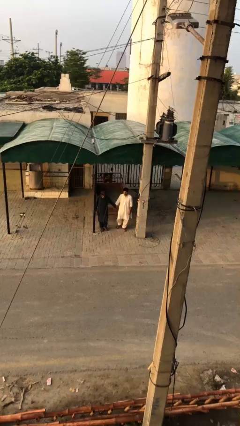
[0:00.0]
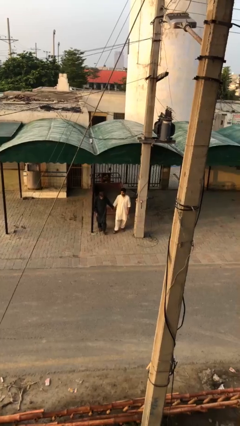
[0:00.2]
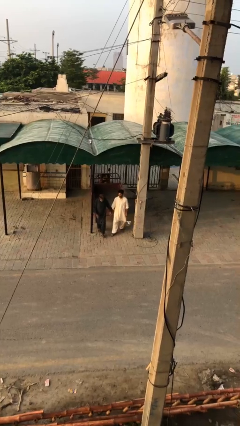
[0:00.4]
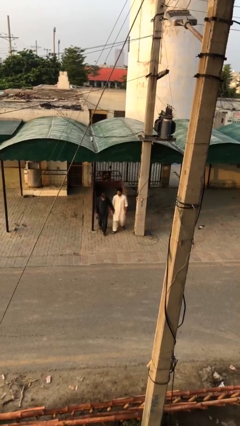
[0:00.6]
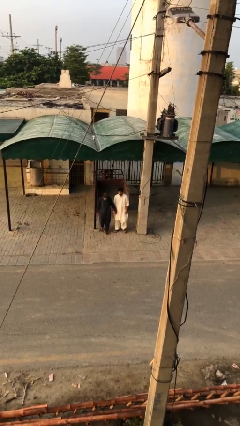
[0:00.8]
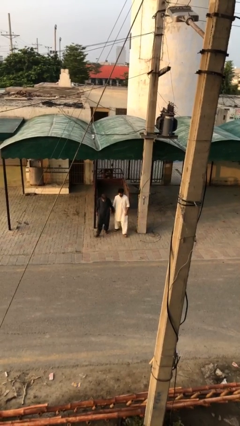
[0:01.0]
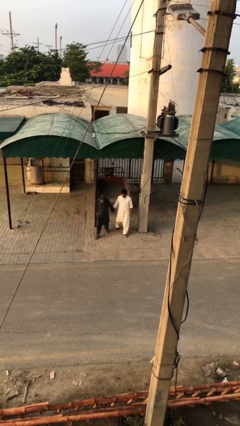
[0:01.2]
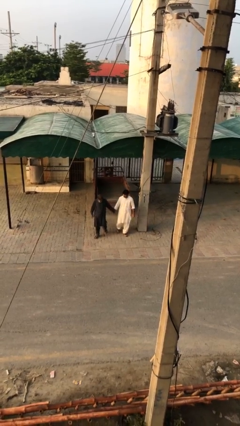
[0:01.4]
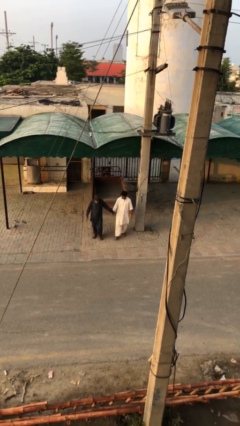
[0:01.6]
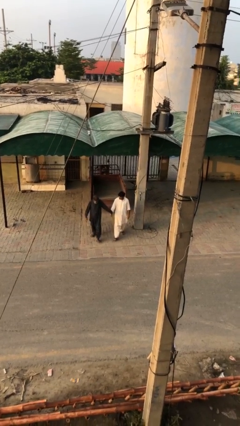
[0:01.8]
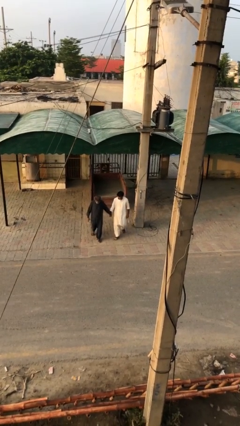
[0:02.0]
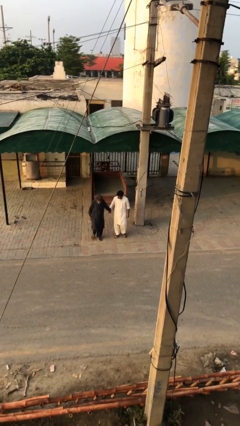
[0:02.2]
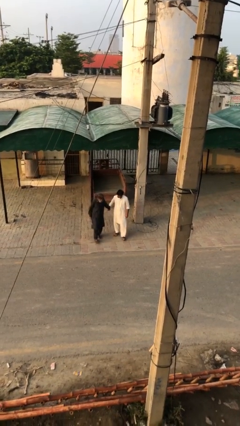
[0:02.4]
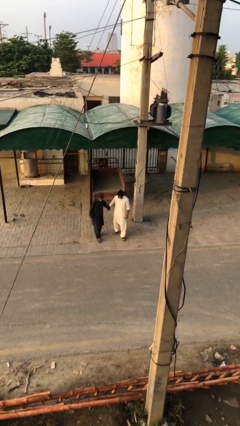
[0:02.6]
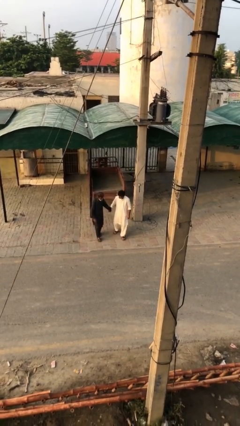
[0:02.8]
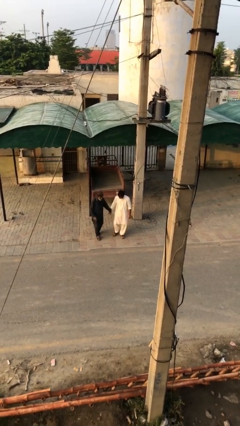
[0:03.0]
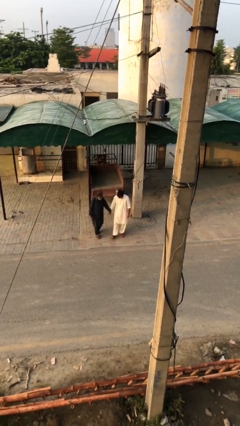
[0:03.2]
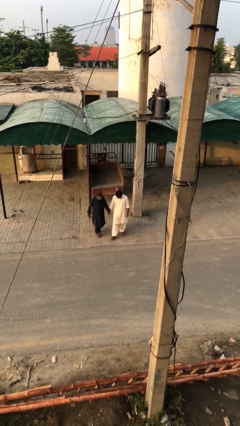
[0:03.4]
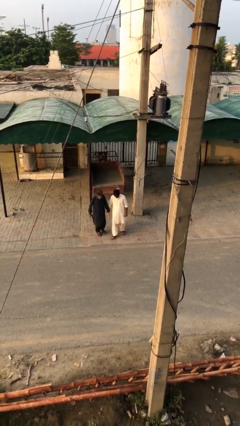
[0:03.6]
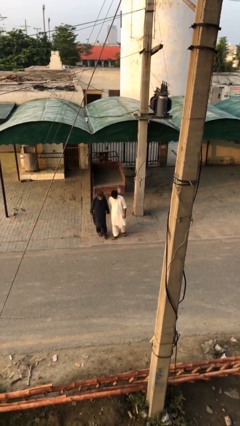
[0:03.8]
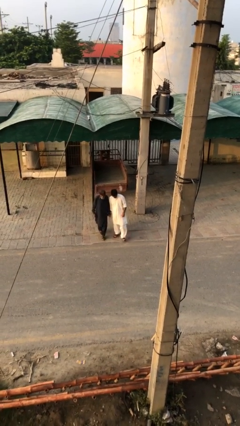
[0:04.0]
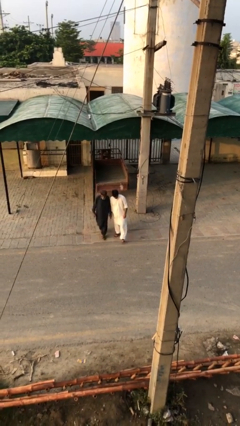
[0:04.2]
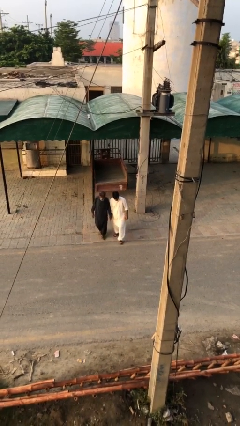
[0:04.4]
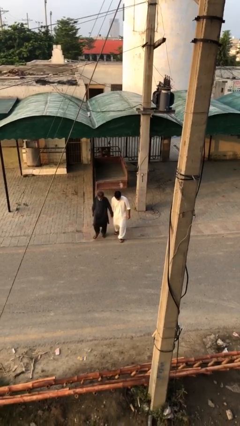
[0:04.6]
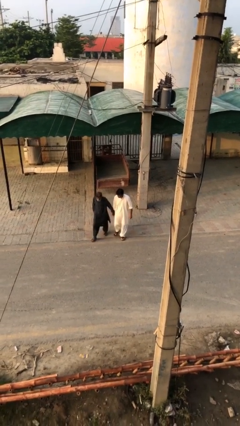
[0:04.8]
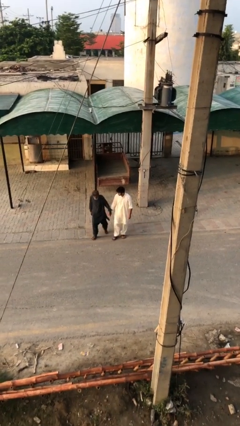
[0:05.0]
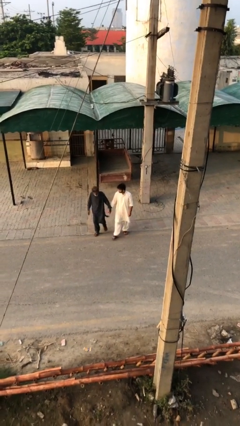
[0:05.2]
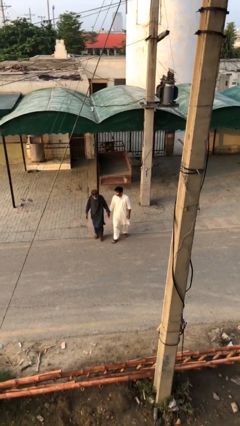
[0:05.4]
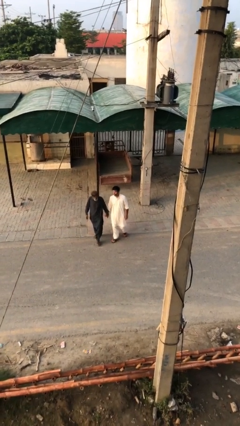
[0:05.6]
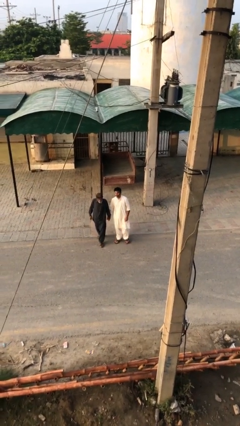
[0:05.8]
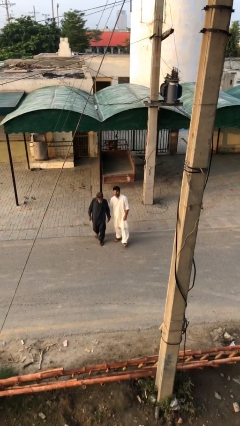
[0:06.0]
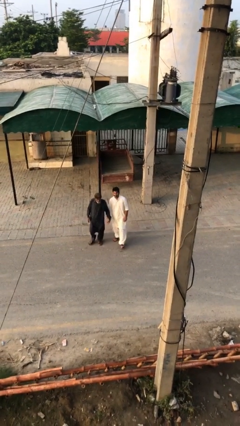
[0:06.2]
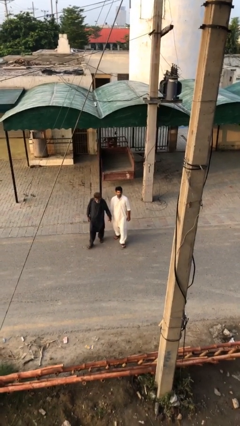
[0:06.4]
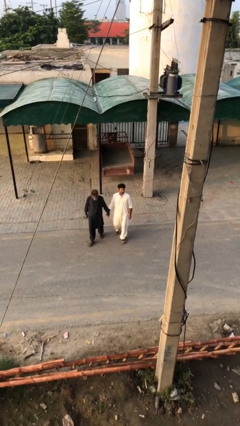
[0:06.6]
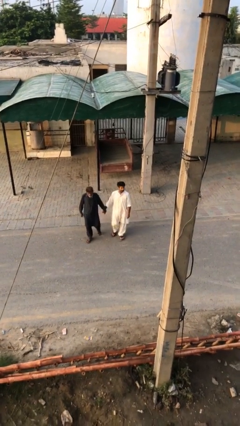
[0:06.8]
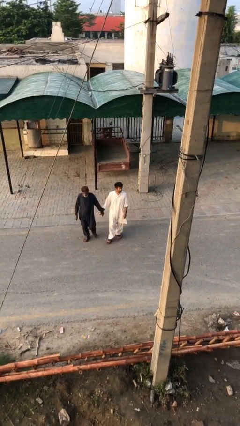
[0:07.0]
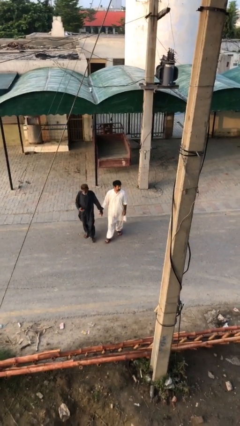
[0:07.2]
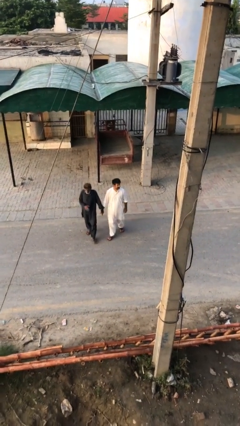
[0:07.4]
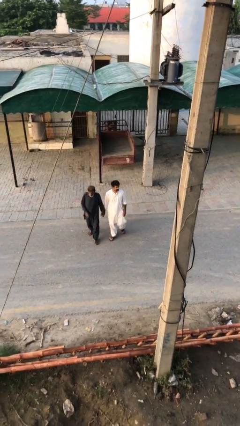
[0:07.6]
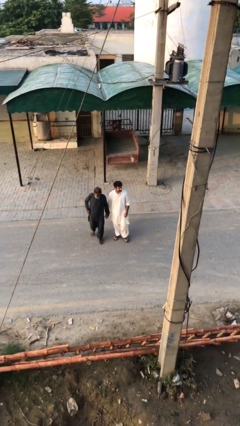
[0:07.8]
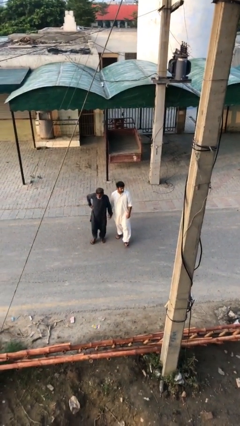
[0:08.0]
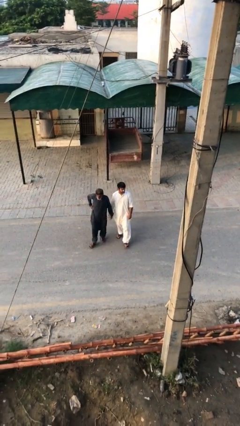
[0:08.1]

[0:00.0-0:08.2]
person holds hand

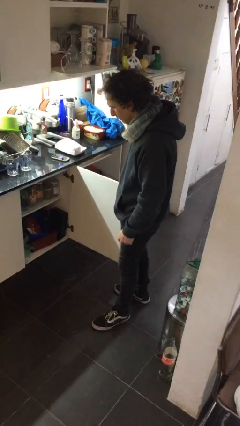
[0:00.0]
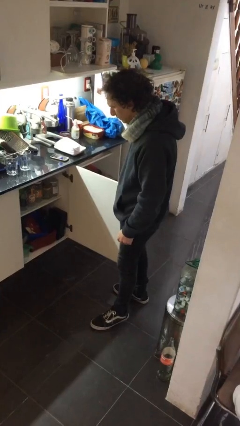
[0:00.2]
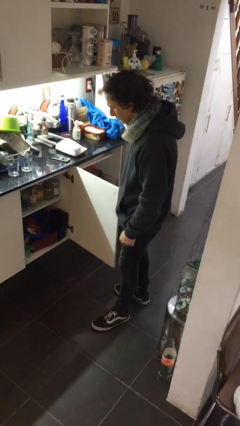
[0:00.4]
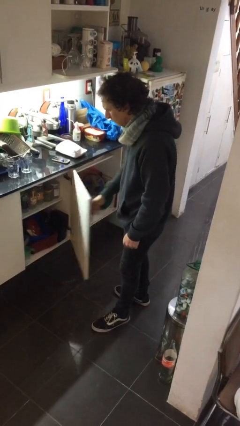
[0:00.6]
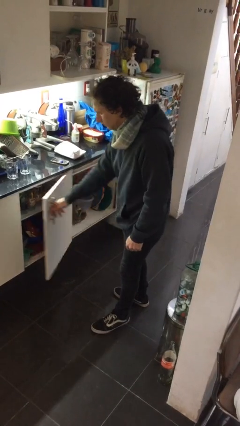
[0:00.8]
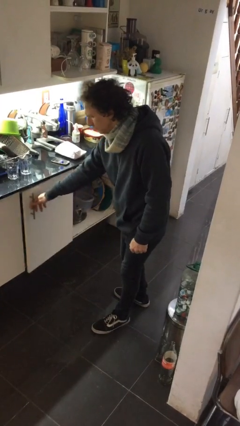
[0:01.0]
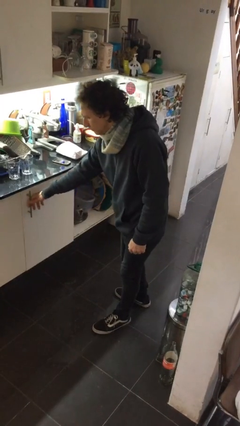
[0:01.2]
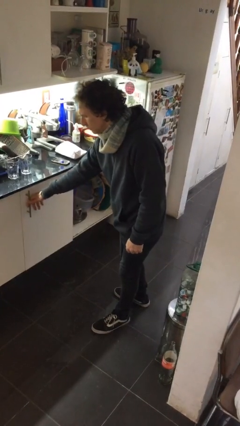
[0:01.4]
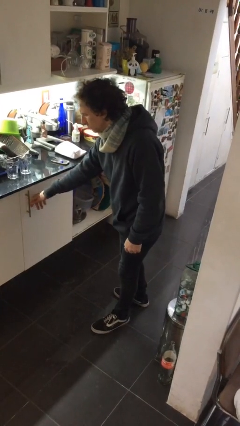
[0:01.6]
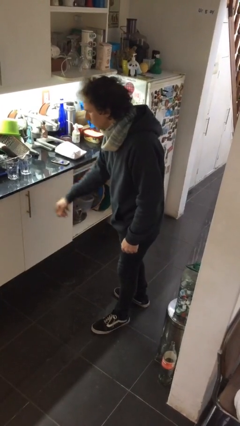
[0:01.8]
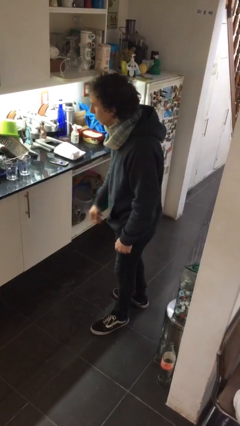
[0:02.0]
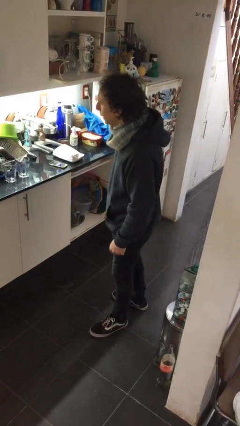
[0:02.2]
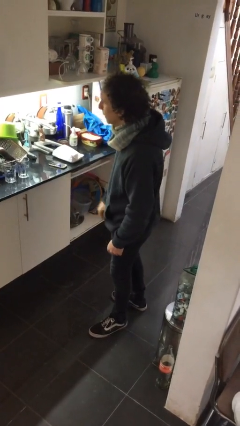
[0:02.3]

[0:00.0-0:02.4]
person closes cabinet

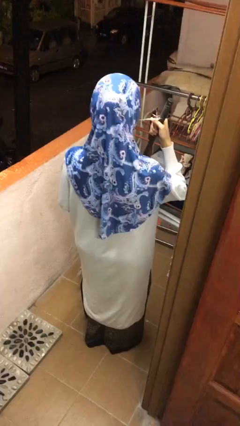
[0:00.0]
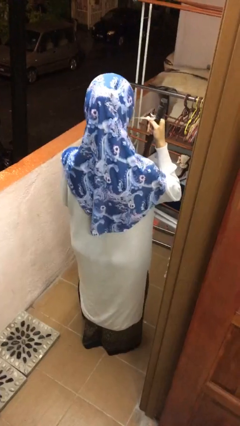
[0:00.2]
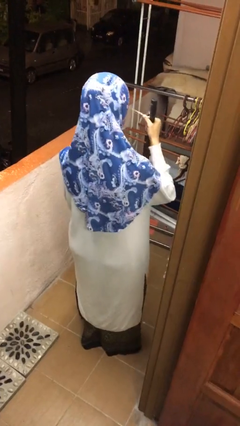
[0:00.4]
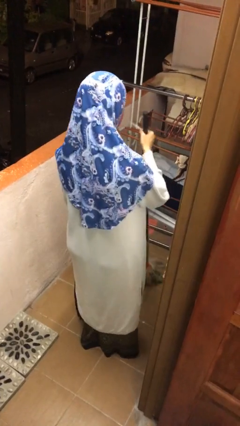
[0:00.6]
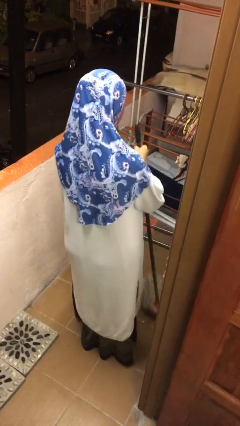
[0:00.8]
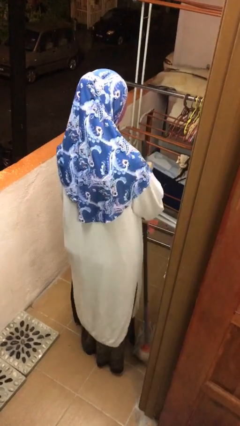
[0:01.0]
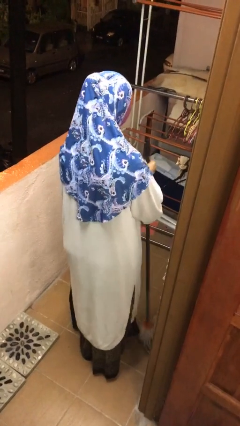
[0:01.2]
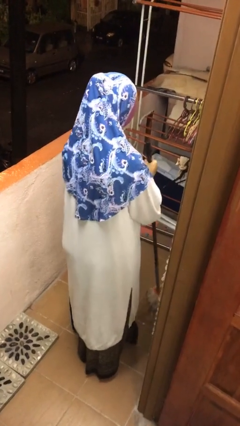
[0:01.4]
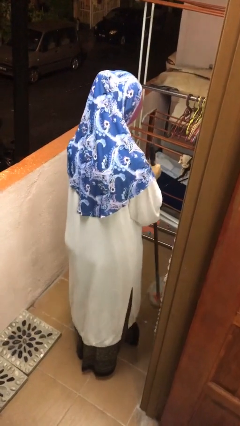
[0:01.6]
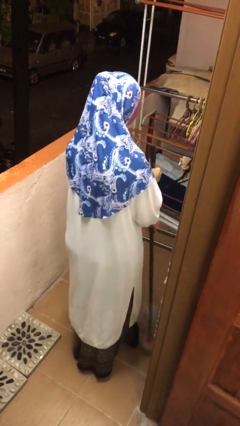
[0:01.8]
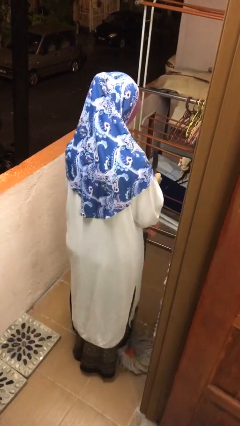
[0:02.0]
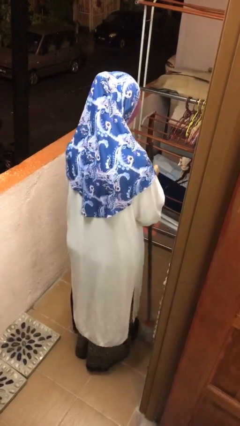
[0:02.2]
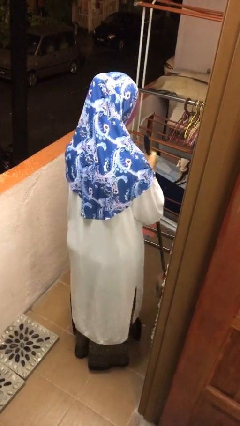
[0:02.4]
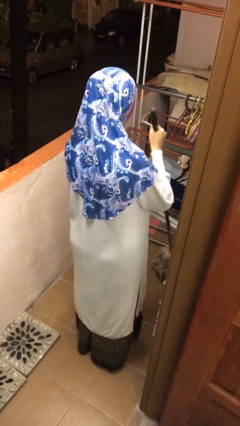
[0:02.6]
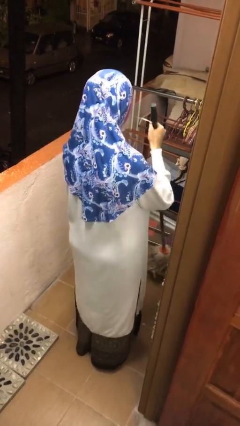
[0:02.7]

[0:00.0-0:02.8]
person mops

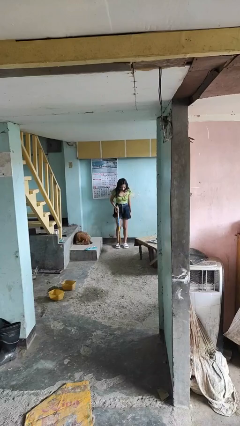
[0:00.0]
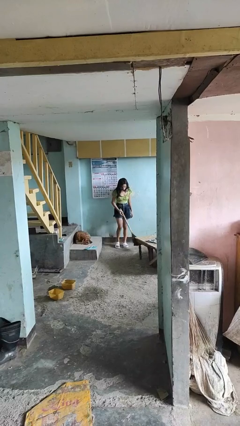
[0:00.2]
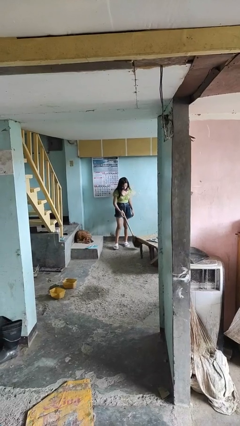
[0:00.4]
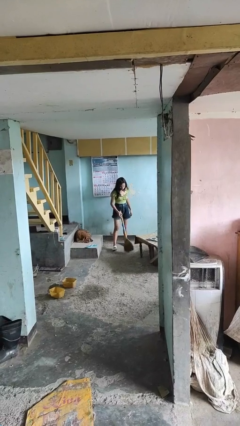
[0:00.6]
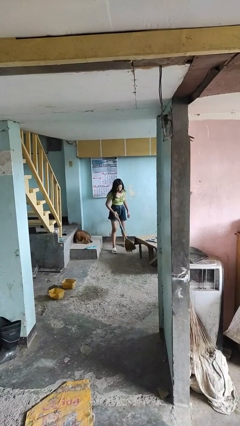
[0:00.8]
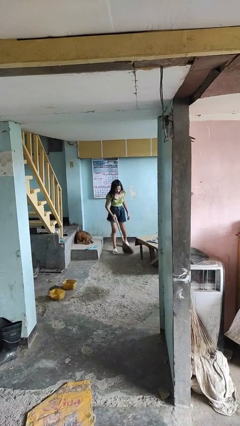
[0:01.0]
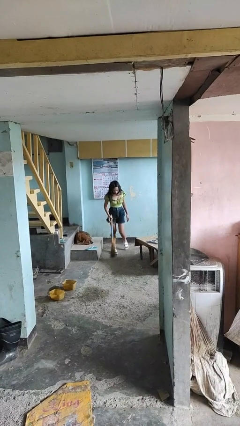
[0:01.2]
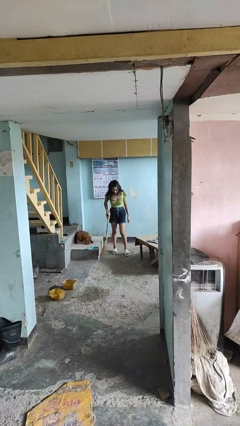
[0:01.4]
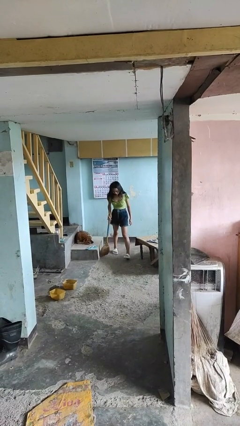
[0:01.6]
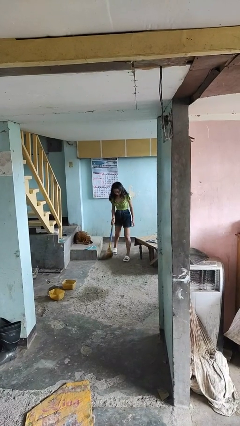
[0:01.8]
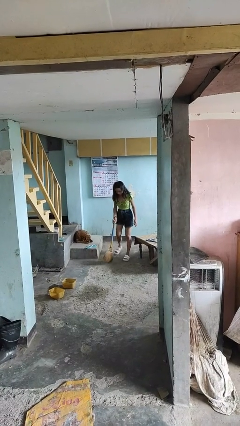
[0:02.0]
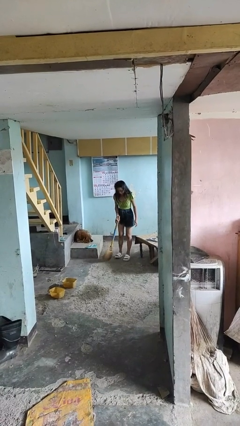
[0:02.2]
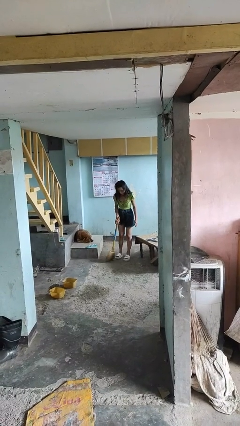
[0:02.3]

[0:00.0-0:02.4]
person sweeps floor

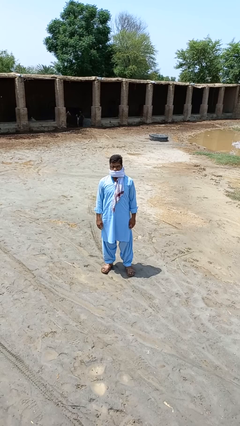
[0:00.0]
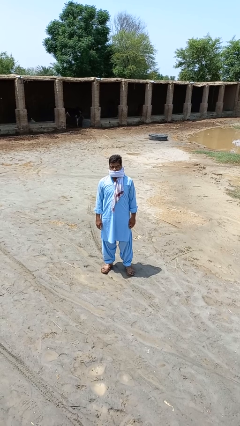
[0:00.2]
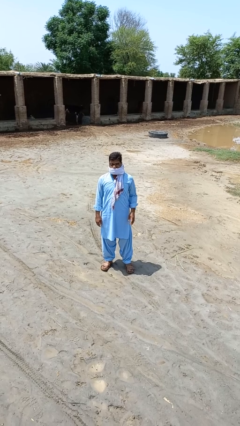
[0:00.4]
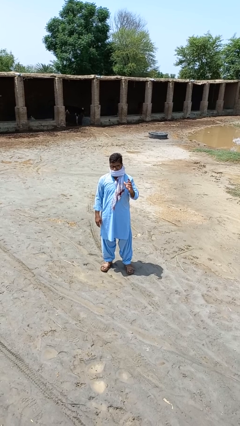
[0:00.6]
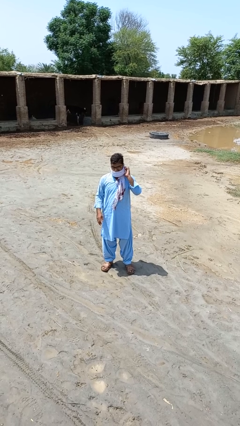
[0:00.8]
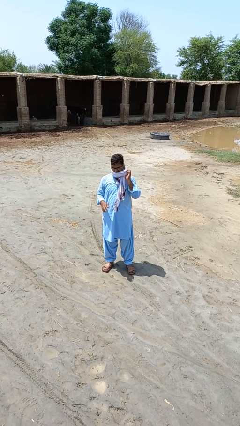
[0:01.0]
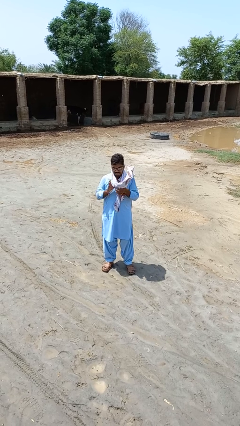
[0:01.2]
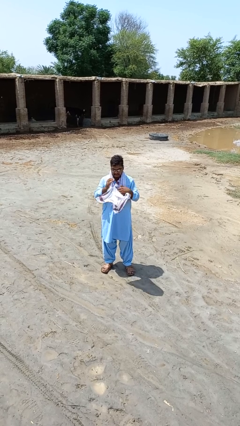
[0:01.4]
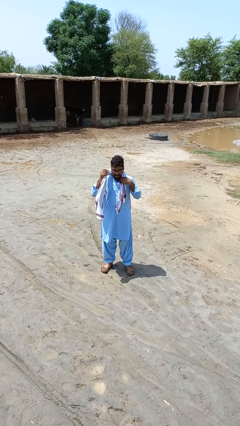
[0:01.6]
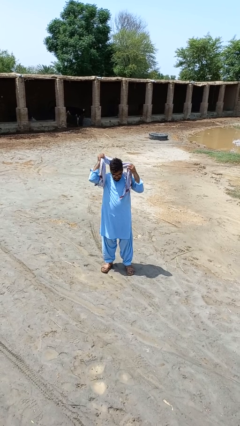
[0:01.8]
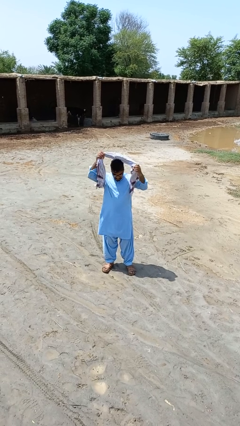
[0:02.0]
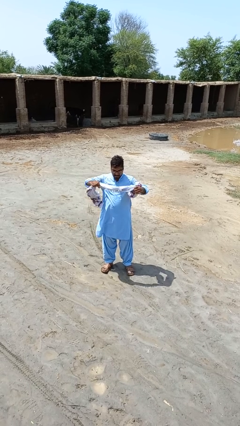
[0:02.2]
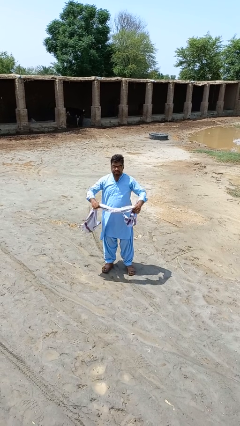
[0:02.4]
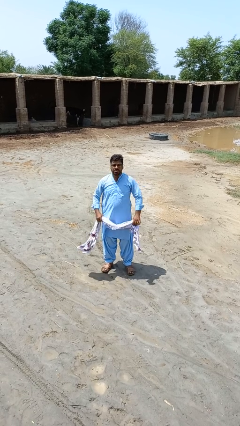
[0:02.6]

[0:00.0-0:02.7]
person takes off scarf
